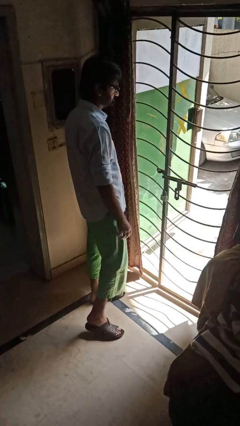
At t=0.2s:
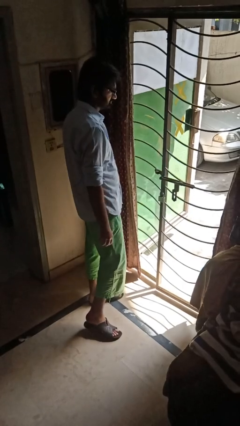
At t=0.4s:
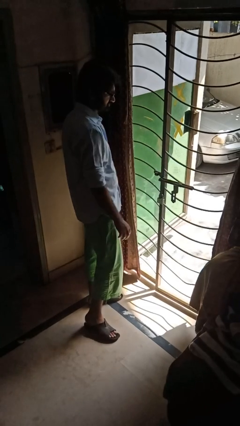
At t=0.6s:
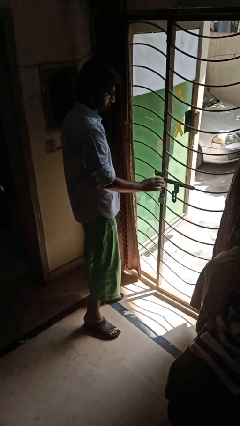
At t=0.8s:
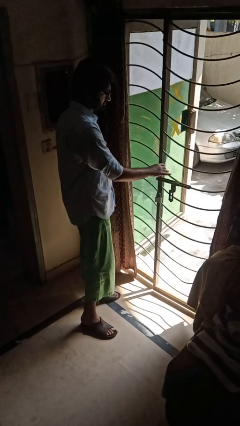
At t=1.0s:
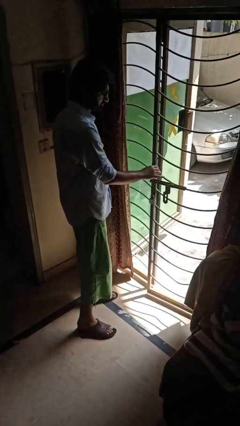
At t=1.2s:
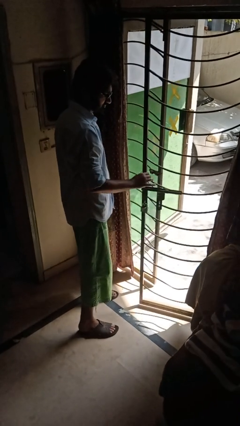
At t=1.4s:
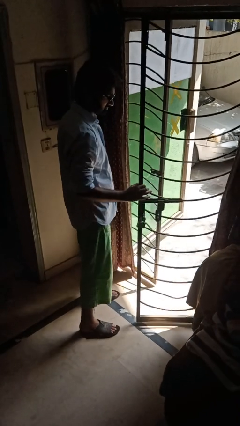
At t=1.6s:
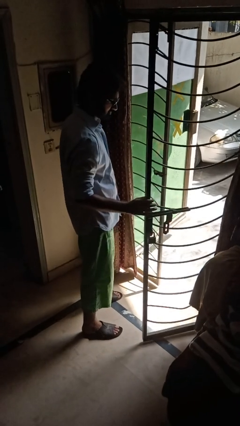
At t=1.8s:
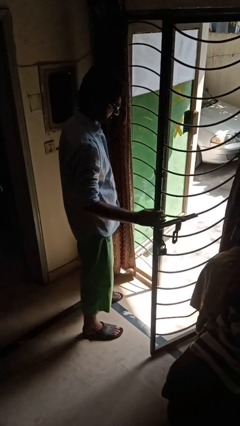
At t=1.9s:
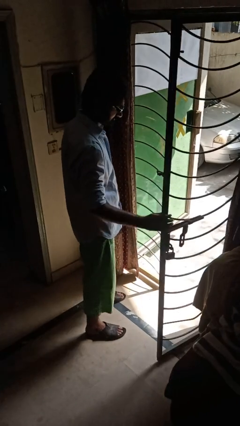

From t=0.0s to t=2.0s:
person opens gate

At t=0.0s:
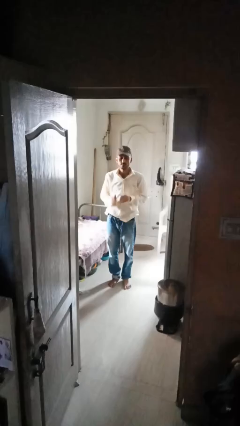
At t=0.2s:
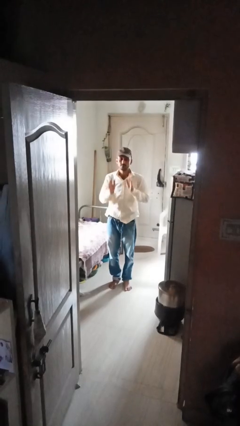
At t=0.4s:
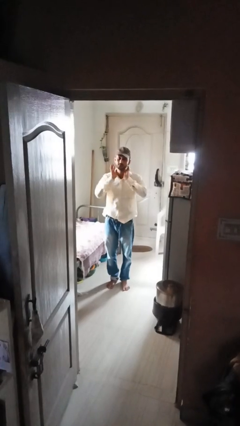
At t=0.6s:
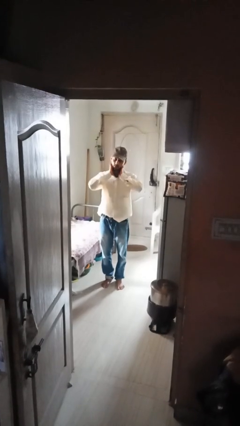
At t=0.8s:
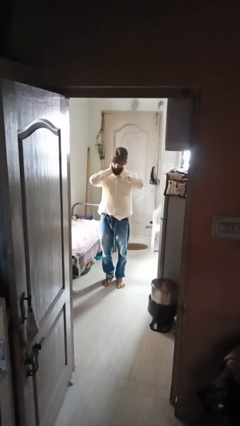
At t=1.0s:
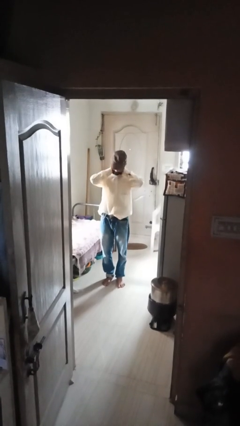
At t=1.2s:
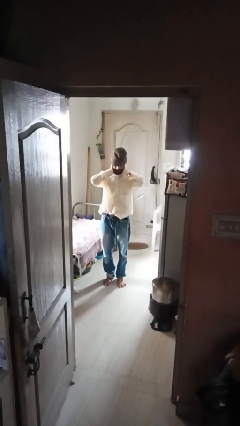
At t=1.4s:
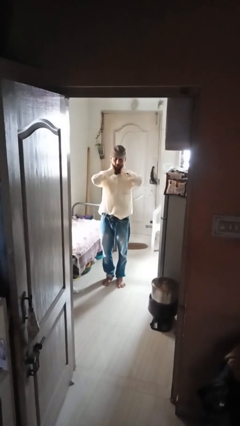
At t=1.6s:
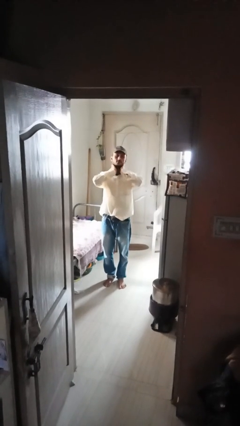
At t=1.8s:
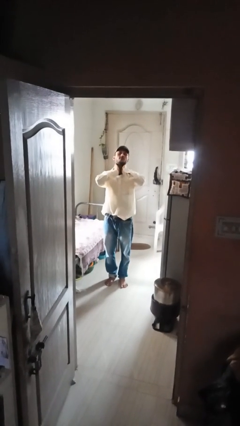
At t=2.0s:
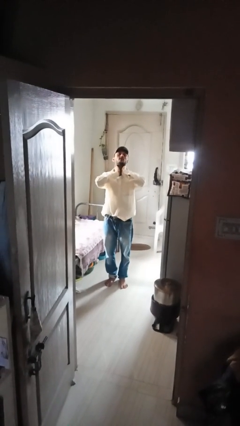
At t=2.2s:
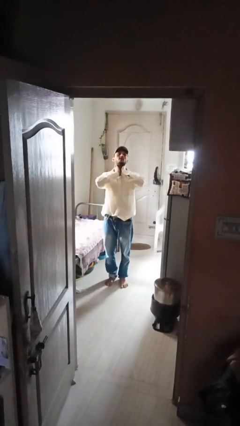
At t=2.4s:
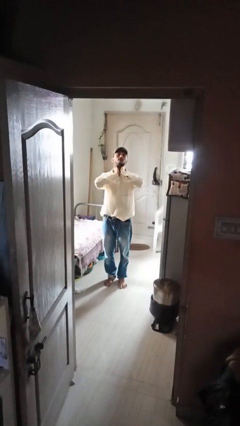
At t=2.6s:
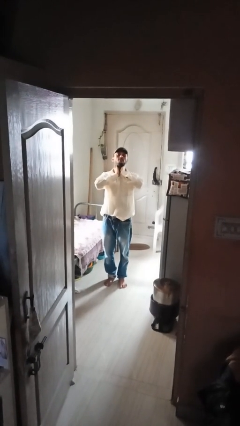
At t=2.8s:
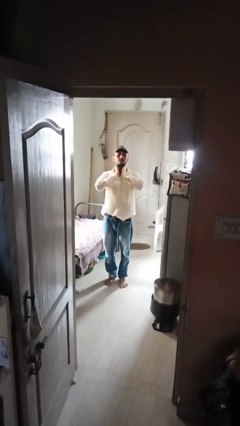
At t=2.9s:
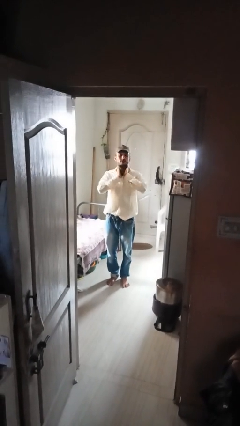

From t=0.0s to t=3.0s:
person rubs neck

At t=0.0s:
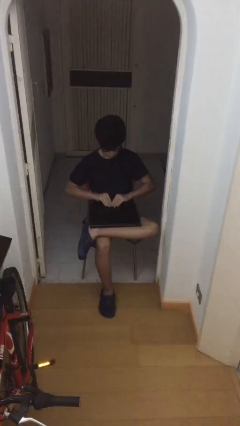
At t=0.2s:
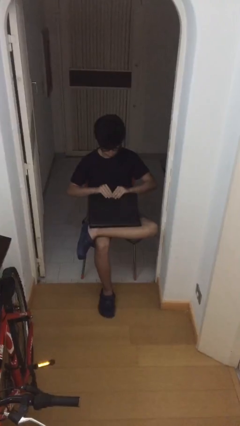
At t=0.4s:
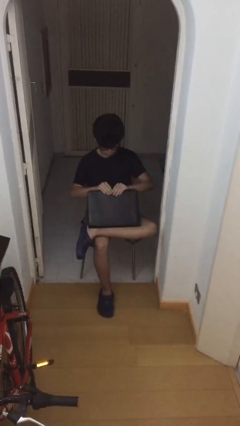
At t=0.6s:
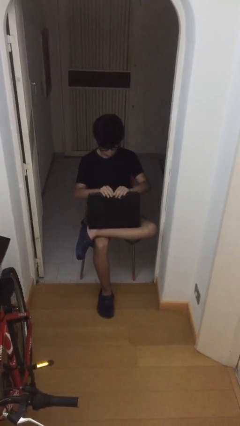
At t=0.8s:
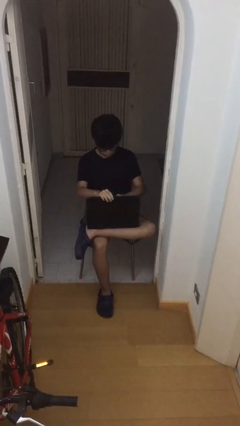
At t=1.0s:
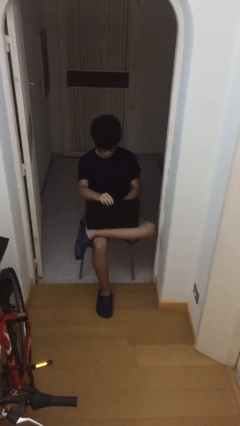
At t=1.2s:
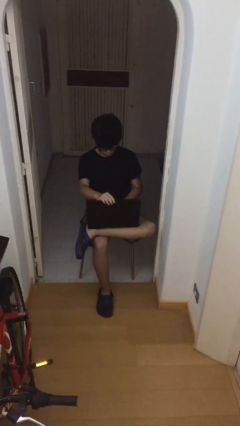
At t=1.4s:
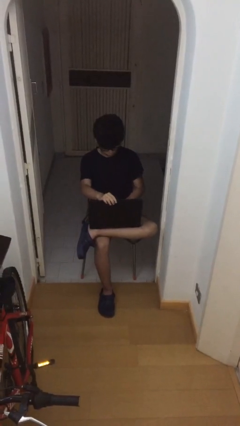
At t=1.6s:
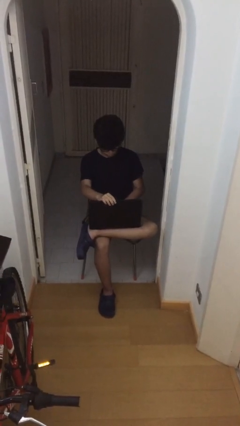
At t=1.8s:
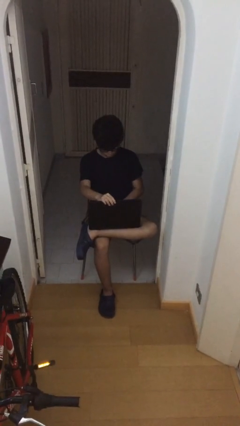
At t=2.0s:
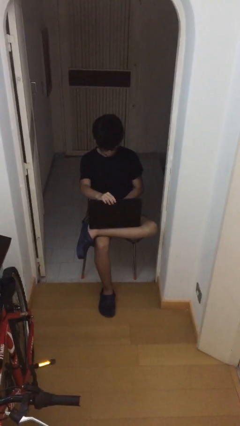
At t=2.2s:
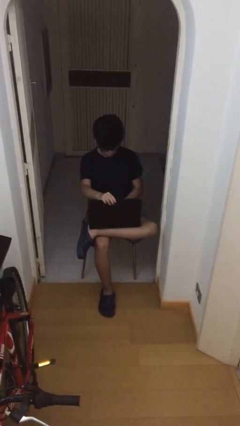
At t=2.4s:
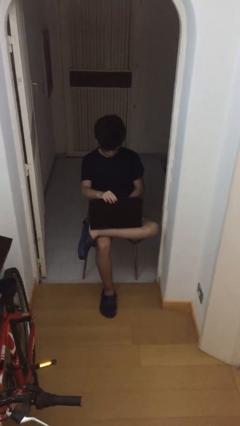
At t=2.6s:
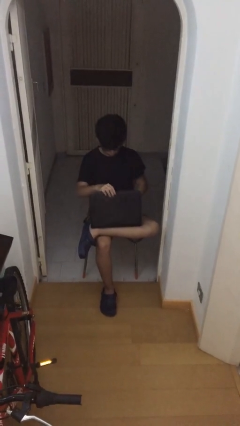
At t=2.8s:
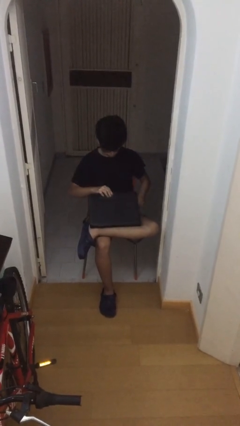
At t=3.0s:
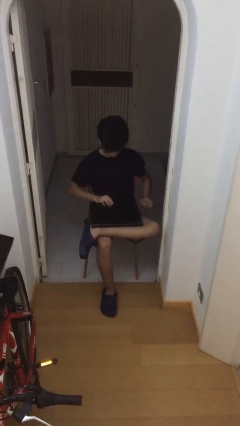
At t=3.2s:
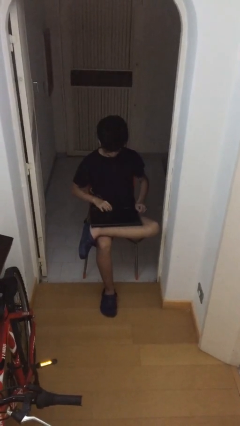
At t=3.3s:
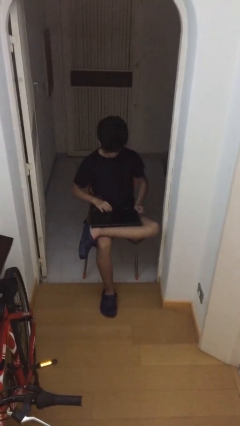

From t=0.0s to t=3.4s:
person interacts with laptop

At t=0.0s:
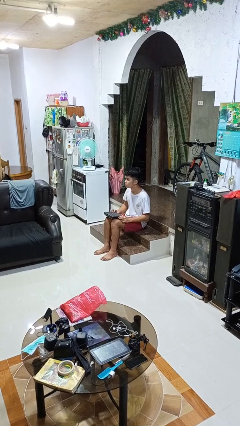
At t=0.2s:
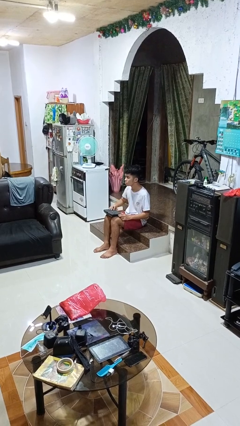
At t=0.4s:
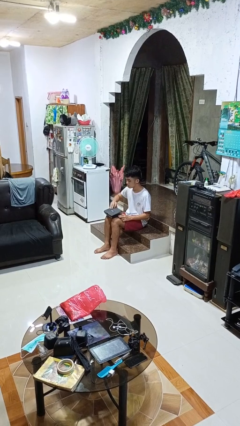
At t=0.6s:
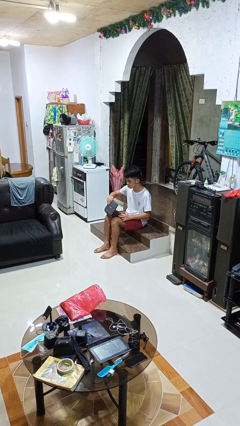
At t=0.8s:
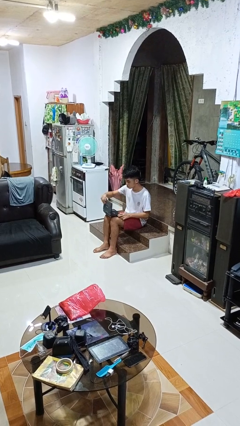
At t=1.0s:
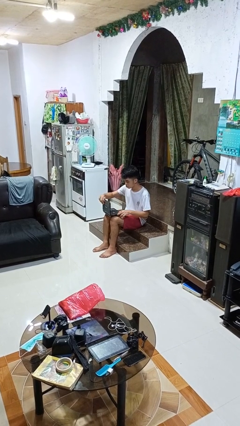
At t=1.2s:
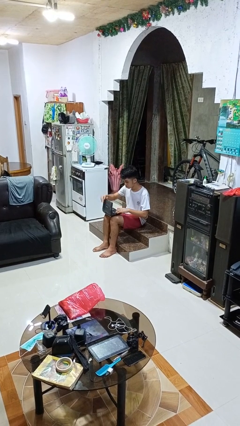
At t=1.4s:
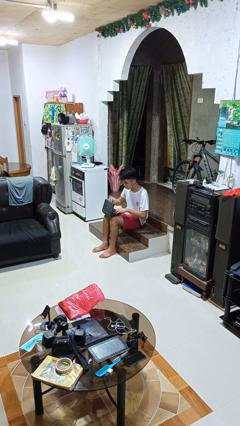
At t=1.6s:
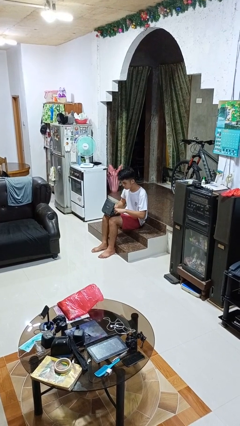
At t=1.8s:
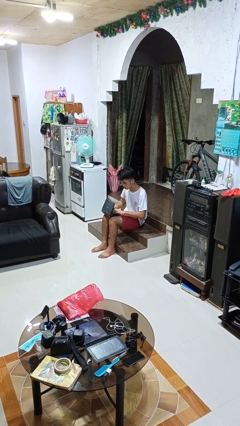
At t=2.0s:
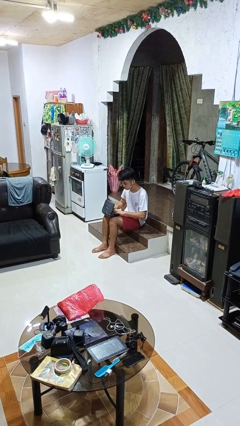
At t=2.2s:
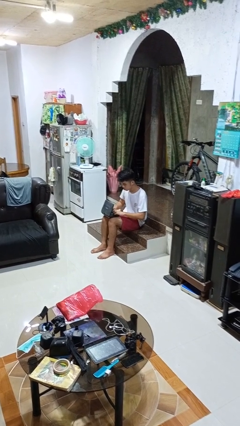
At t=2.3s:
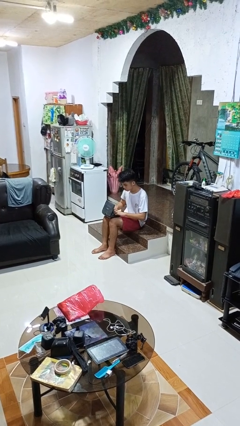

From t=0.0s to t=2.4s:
person opens laptop

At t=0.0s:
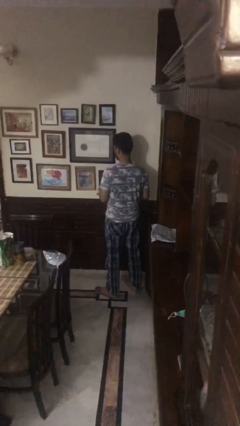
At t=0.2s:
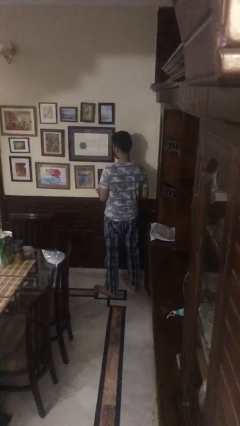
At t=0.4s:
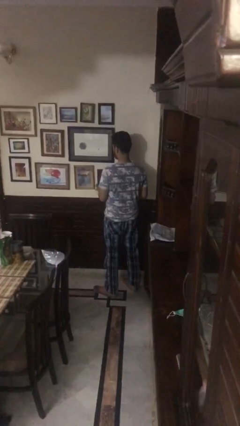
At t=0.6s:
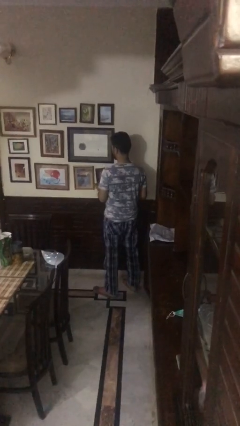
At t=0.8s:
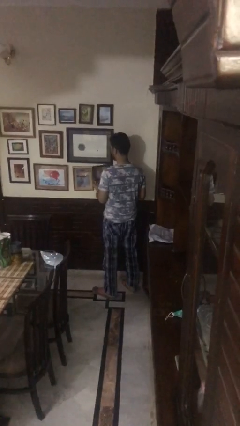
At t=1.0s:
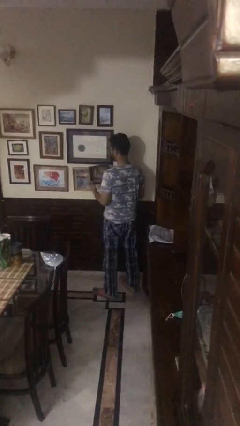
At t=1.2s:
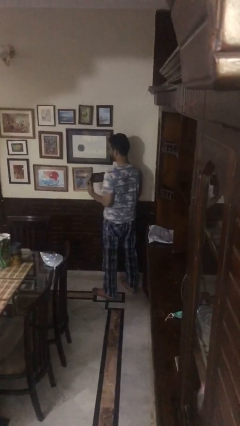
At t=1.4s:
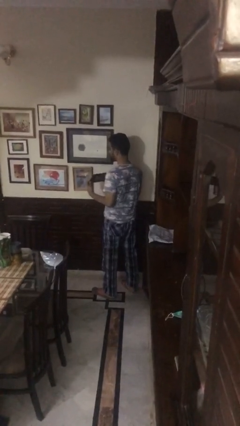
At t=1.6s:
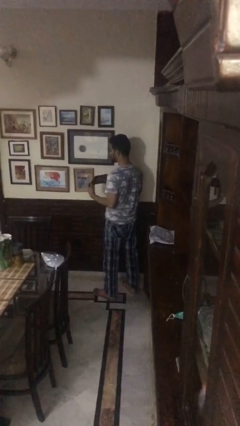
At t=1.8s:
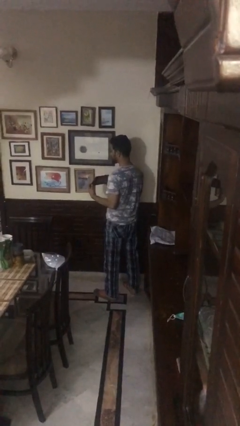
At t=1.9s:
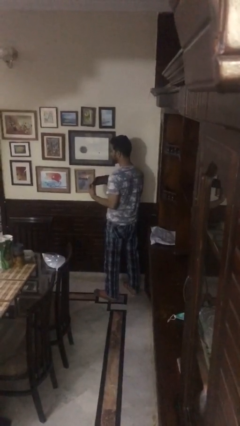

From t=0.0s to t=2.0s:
person takes down picture frame

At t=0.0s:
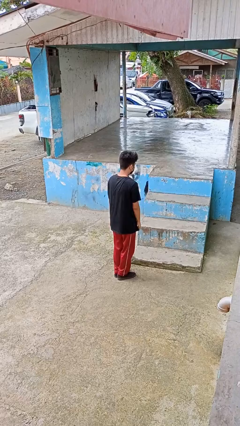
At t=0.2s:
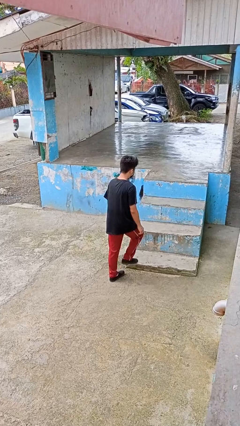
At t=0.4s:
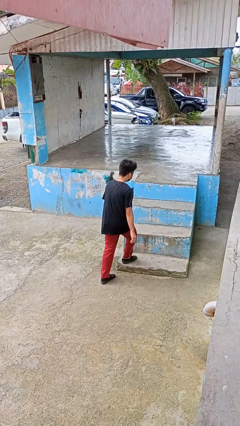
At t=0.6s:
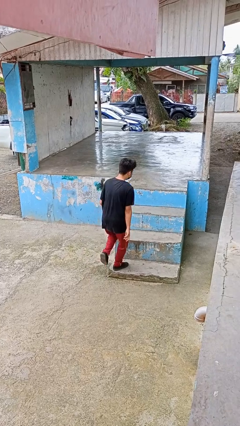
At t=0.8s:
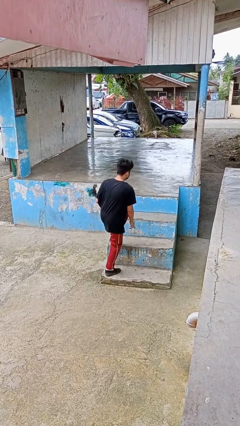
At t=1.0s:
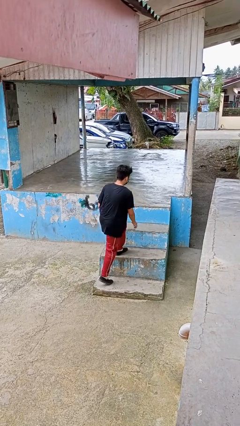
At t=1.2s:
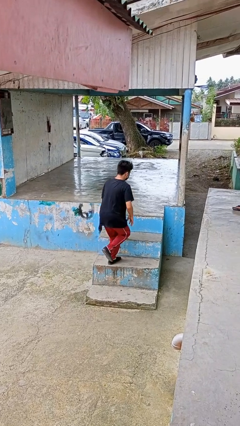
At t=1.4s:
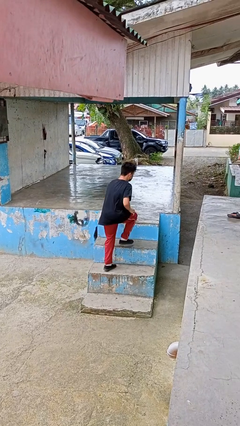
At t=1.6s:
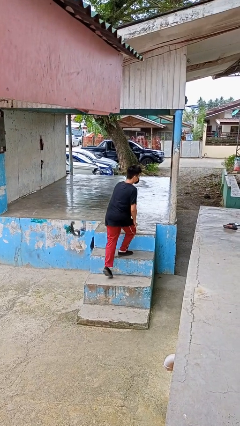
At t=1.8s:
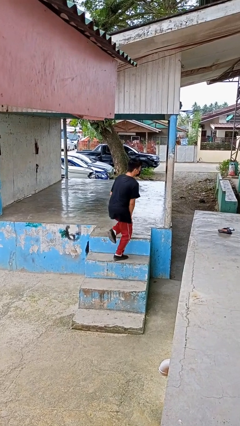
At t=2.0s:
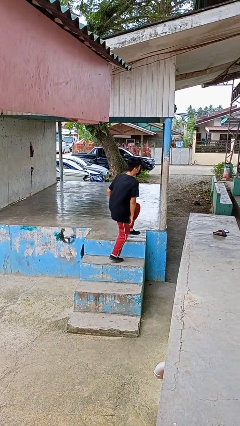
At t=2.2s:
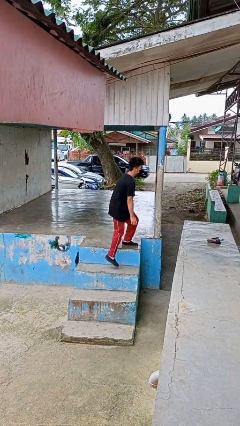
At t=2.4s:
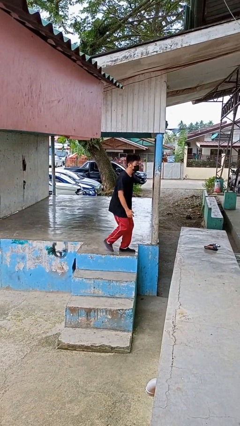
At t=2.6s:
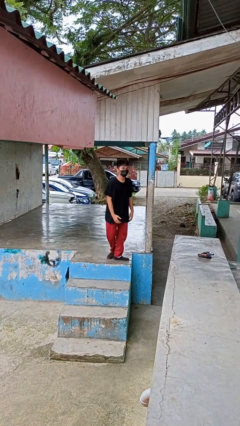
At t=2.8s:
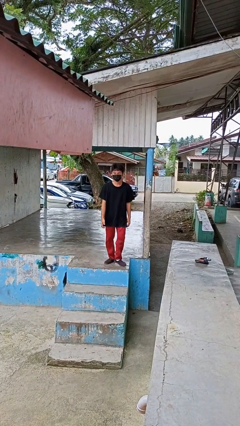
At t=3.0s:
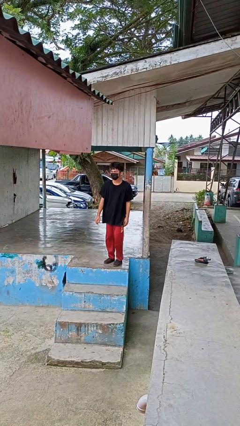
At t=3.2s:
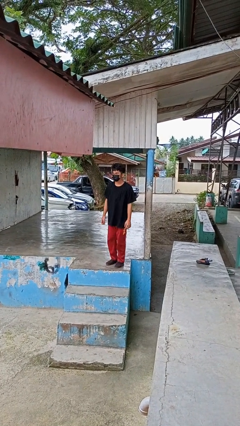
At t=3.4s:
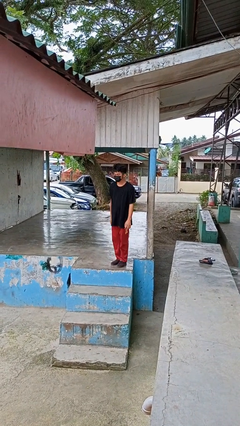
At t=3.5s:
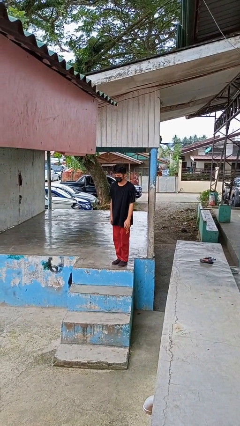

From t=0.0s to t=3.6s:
person climbs up stairs

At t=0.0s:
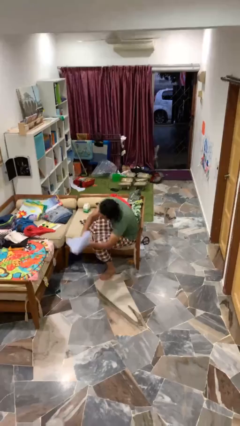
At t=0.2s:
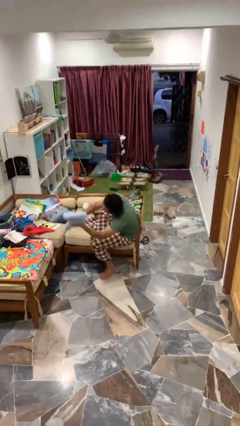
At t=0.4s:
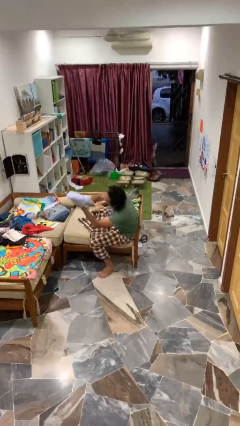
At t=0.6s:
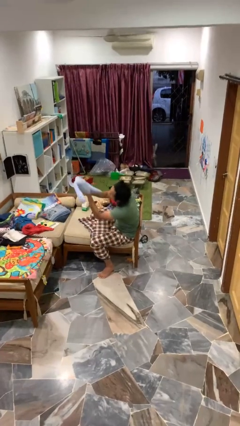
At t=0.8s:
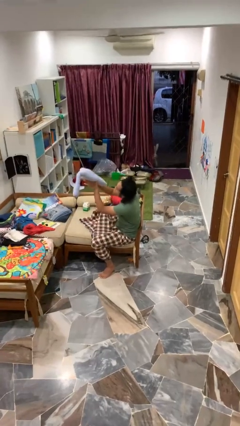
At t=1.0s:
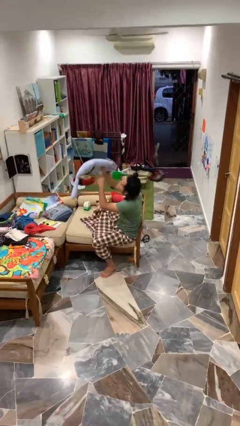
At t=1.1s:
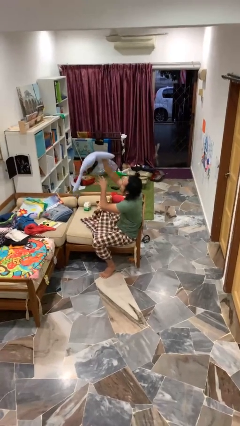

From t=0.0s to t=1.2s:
person catches dropped object
